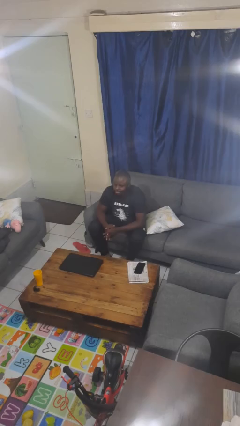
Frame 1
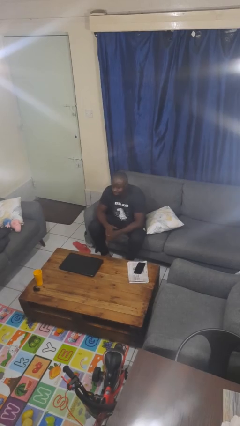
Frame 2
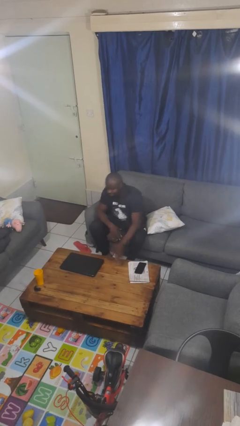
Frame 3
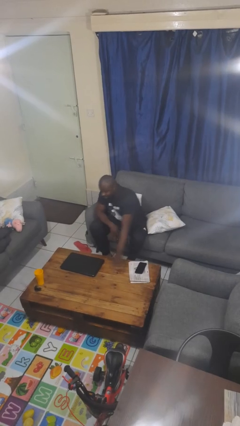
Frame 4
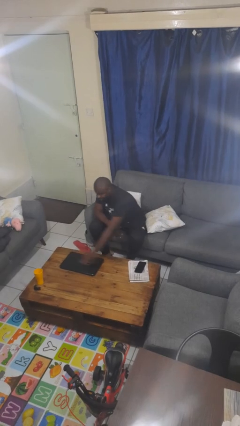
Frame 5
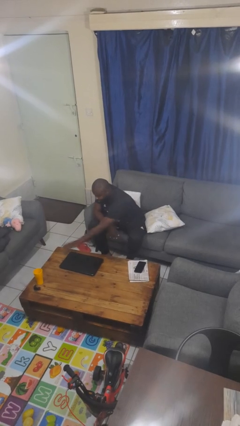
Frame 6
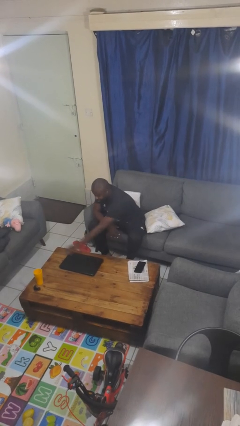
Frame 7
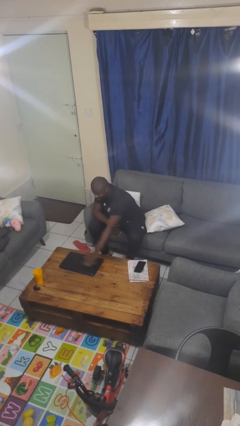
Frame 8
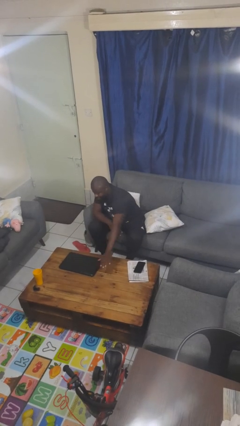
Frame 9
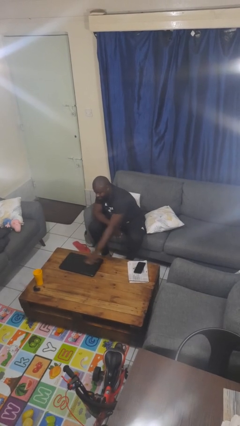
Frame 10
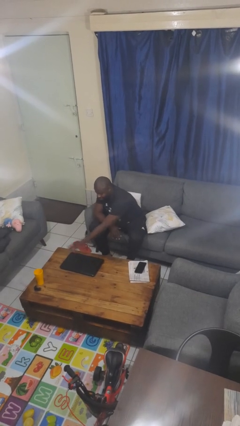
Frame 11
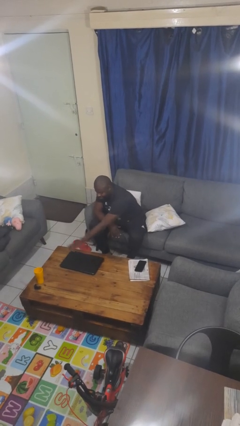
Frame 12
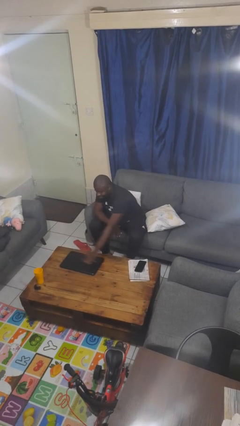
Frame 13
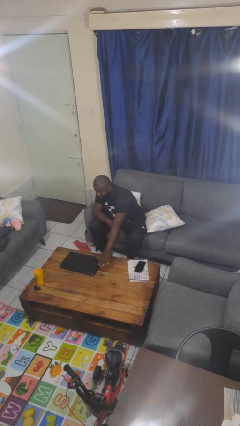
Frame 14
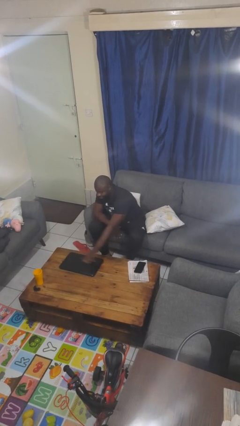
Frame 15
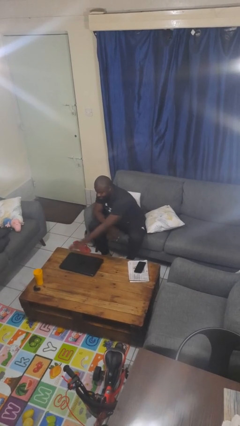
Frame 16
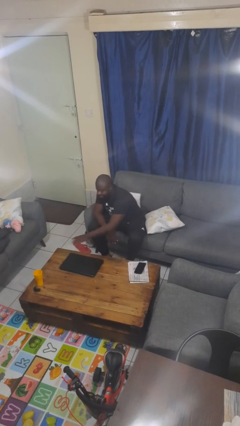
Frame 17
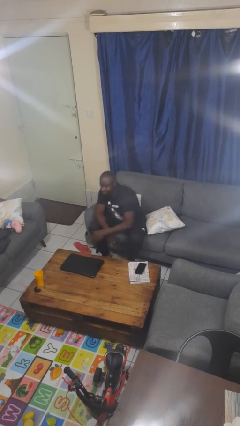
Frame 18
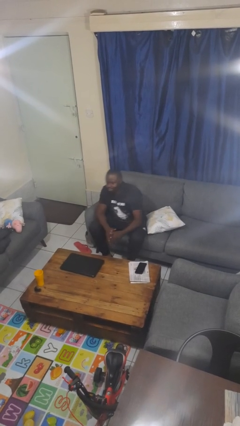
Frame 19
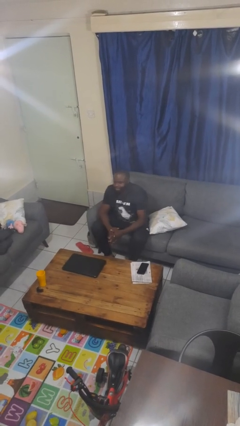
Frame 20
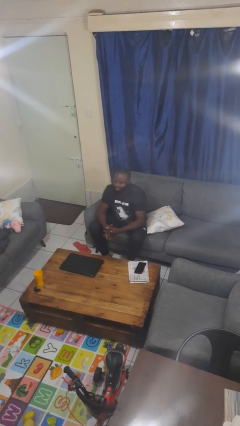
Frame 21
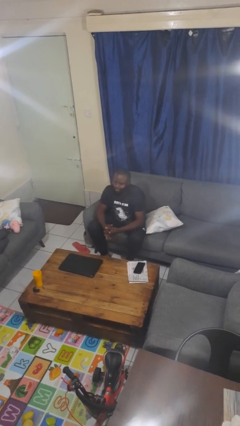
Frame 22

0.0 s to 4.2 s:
person waves hand over object

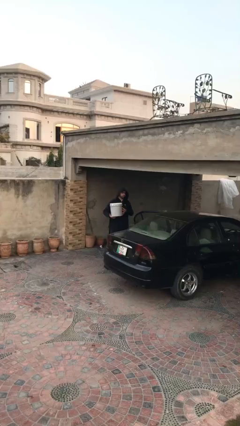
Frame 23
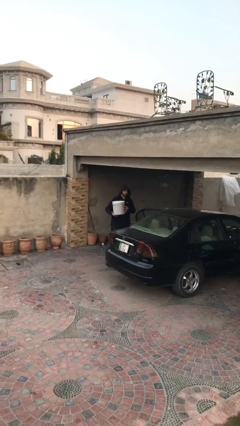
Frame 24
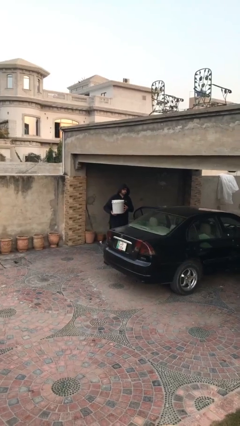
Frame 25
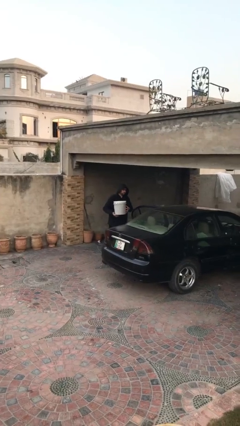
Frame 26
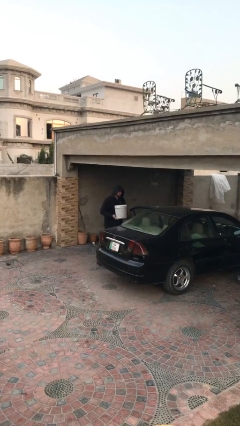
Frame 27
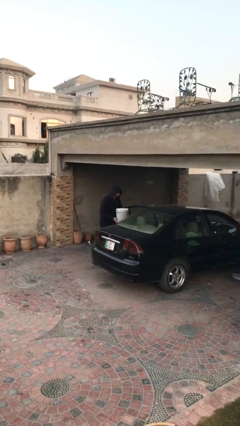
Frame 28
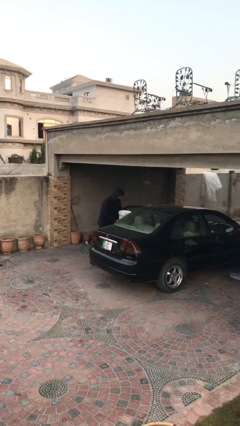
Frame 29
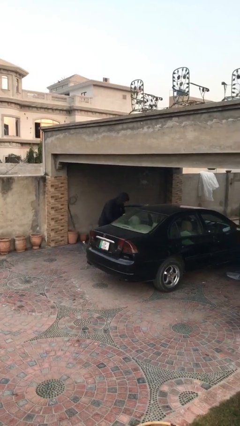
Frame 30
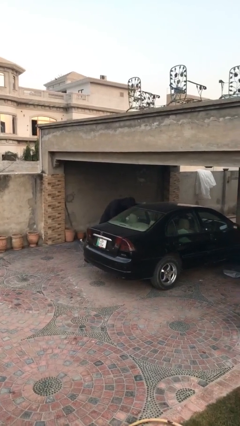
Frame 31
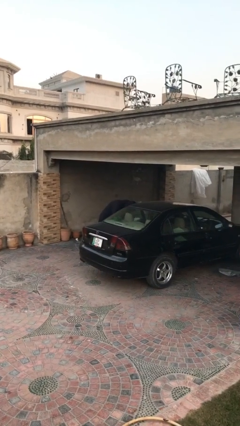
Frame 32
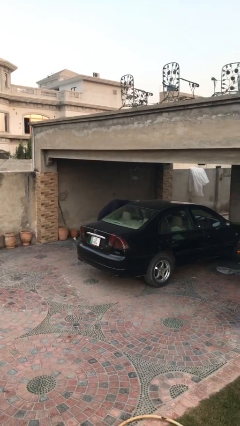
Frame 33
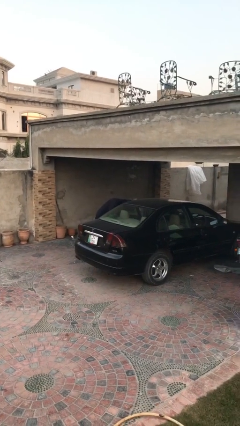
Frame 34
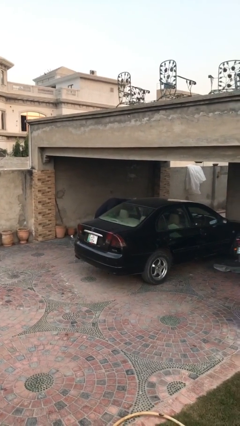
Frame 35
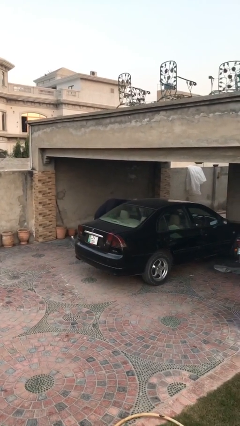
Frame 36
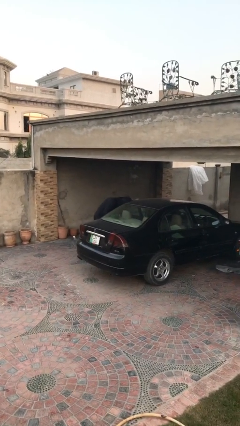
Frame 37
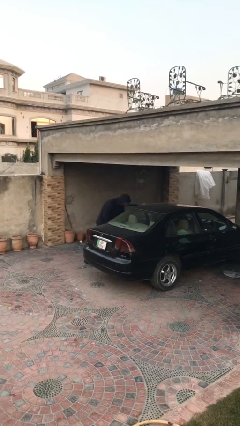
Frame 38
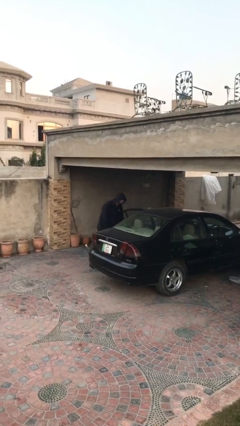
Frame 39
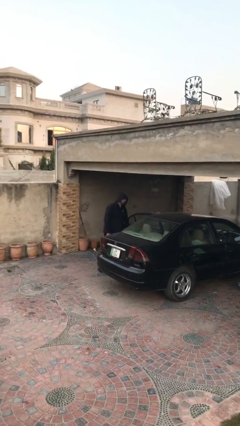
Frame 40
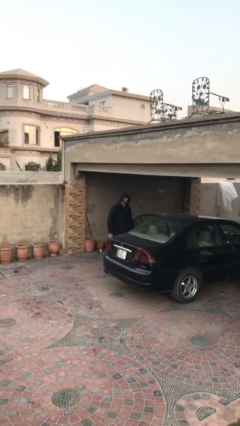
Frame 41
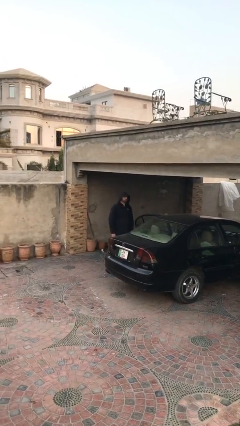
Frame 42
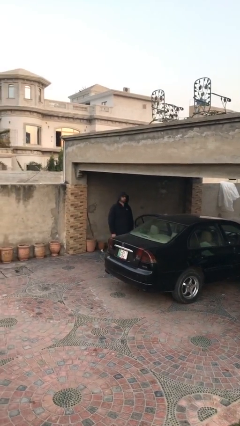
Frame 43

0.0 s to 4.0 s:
person loads car

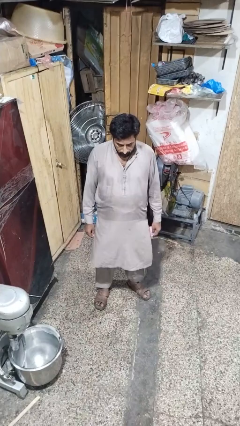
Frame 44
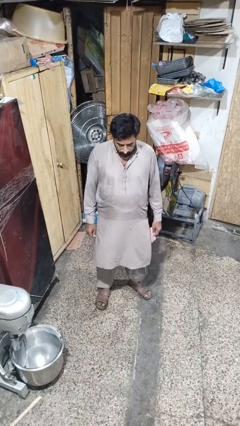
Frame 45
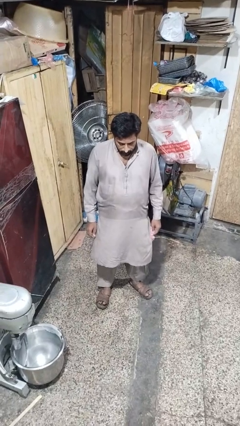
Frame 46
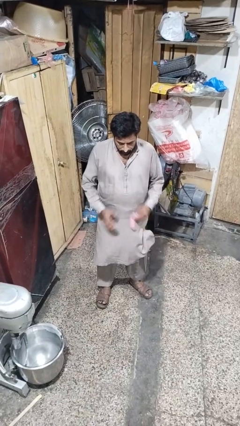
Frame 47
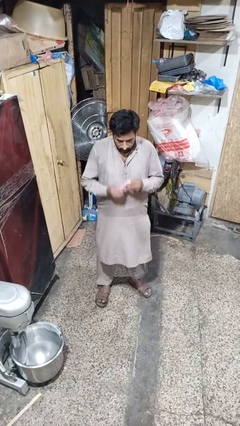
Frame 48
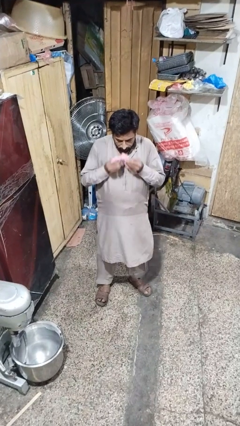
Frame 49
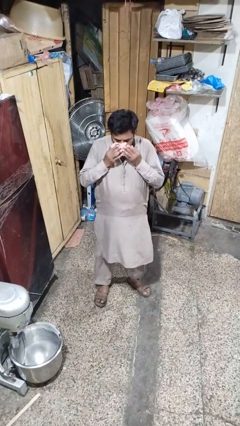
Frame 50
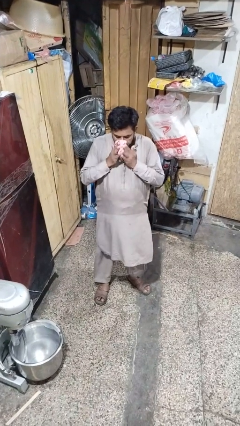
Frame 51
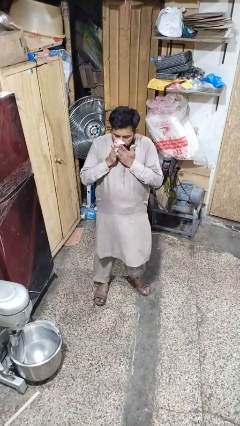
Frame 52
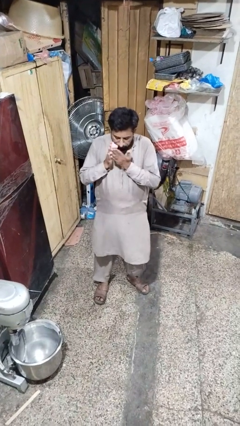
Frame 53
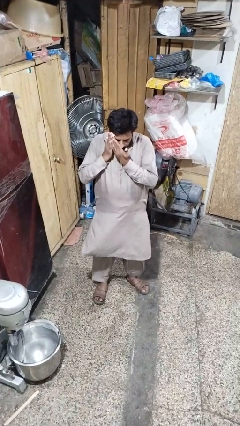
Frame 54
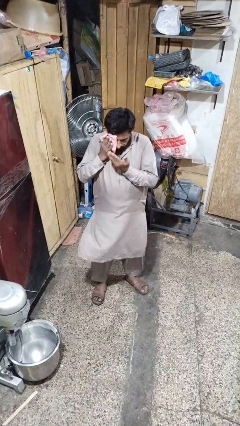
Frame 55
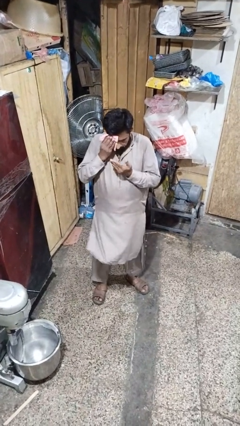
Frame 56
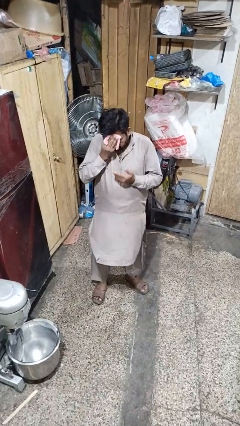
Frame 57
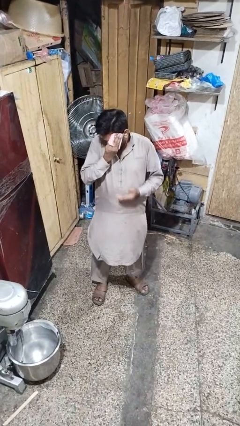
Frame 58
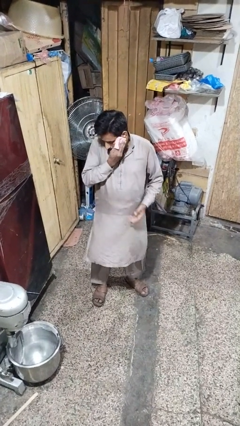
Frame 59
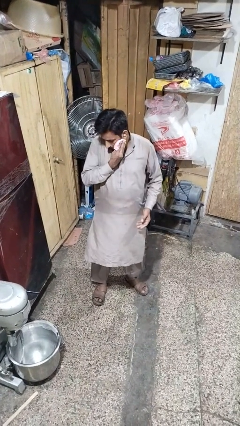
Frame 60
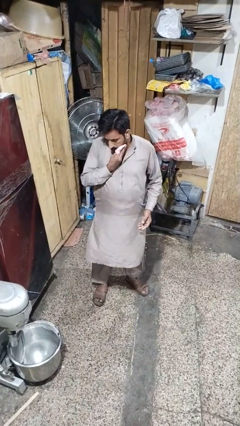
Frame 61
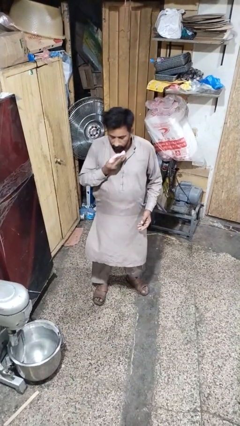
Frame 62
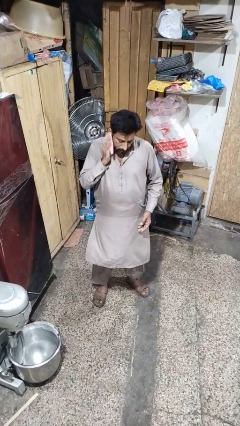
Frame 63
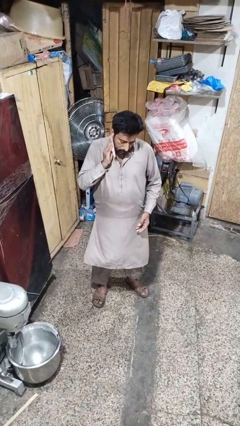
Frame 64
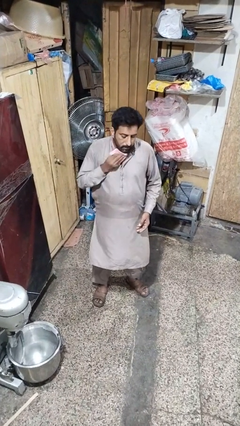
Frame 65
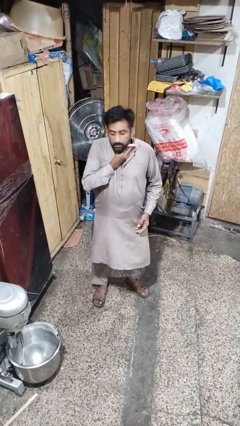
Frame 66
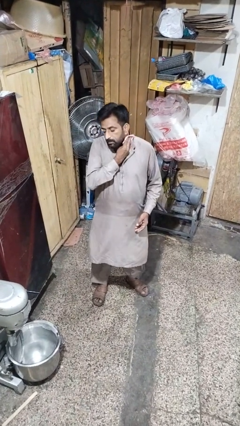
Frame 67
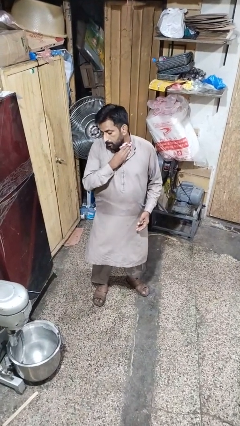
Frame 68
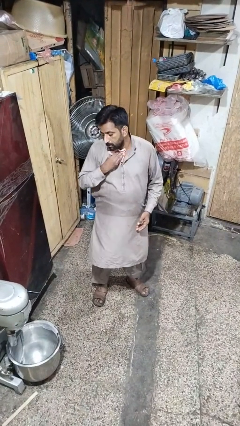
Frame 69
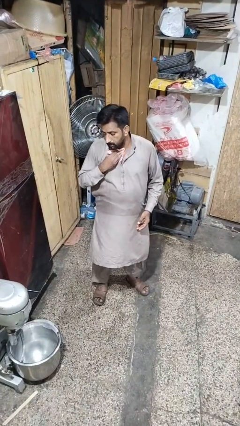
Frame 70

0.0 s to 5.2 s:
person wipes mouth with napkin

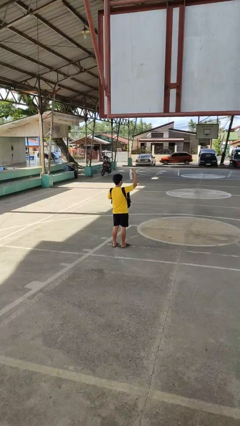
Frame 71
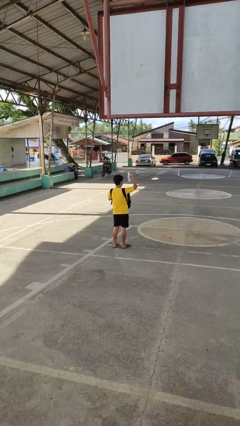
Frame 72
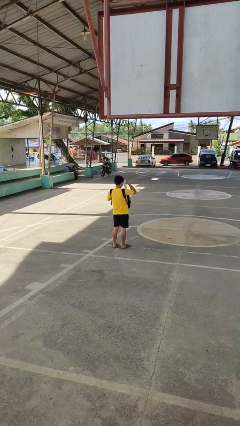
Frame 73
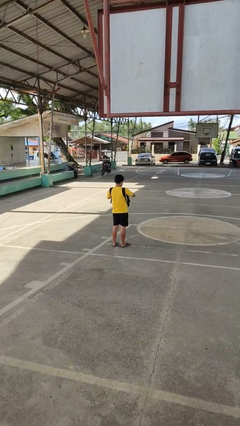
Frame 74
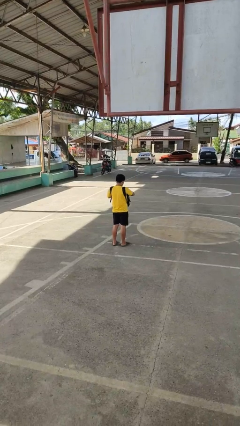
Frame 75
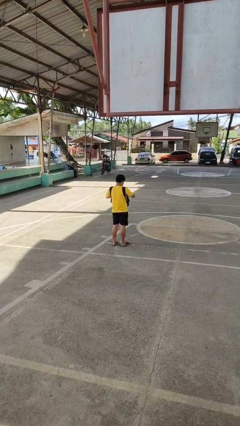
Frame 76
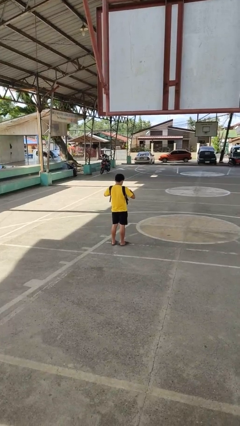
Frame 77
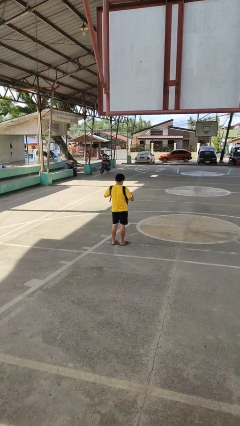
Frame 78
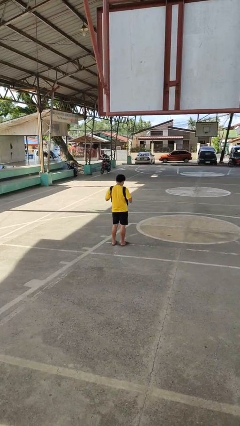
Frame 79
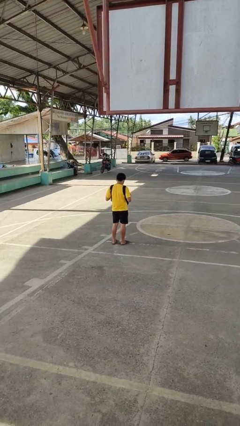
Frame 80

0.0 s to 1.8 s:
person puts object into backpack

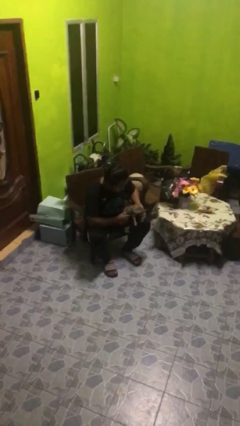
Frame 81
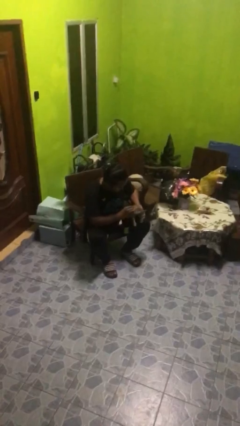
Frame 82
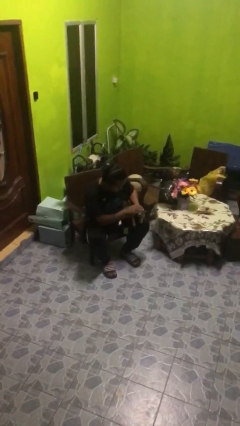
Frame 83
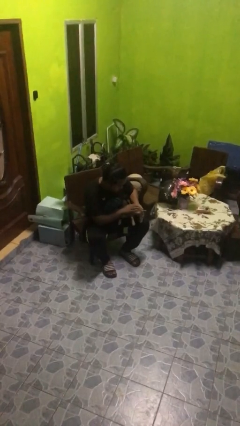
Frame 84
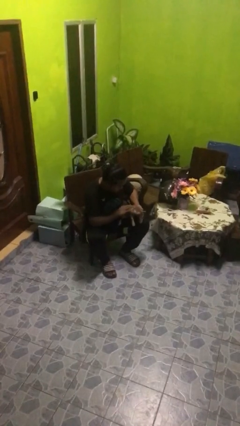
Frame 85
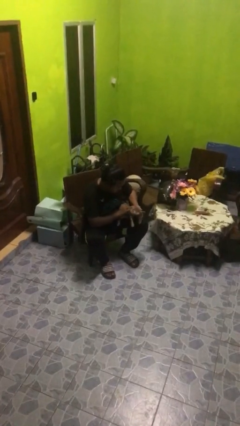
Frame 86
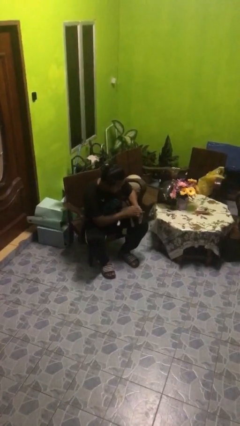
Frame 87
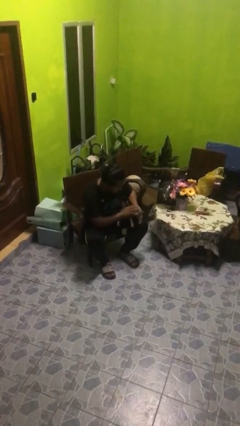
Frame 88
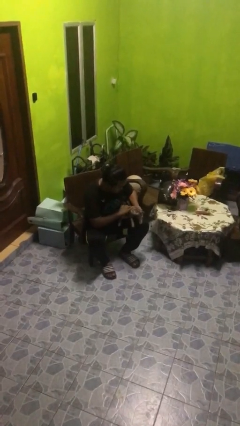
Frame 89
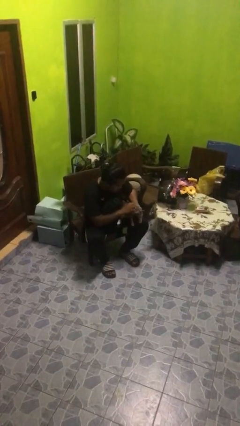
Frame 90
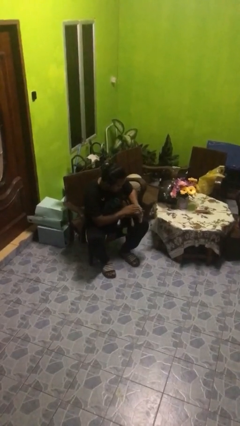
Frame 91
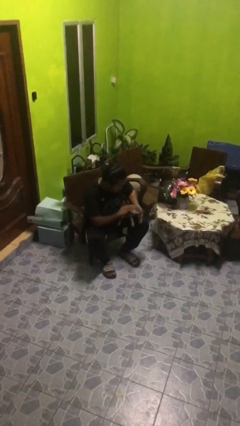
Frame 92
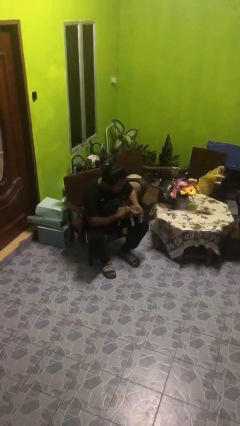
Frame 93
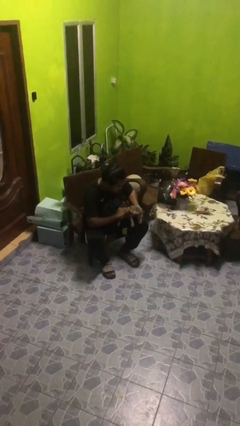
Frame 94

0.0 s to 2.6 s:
person pets cat
